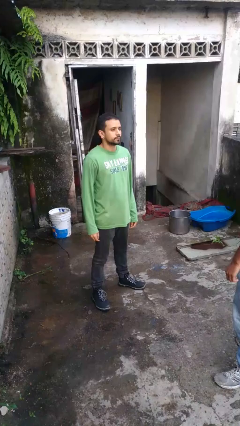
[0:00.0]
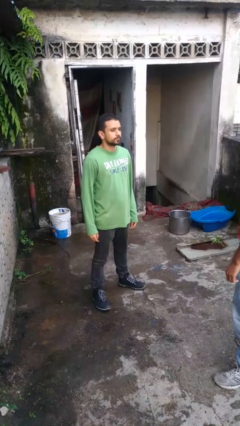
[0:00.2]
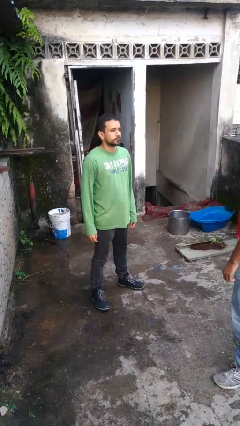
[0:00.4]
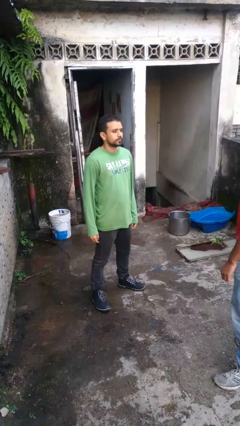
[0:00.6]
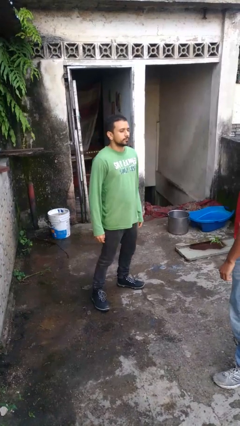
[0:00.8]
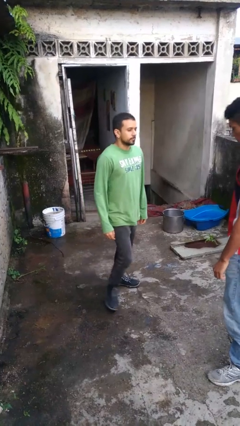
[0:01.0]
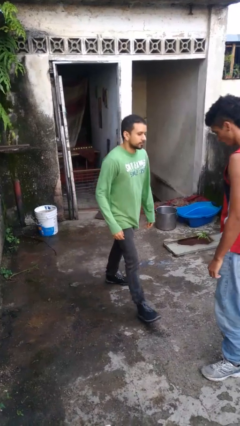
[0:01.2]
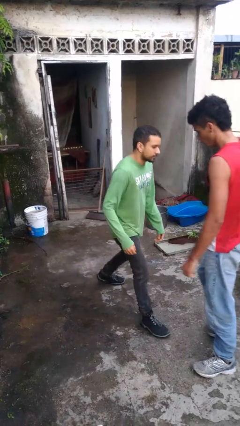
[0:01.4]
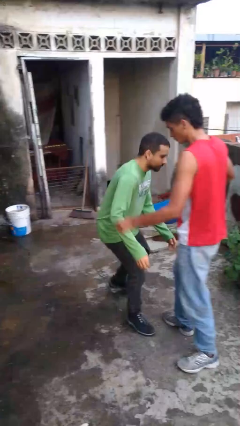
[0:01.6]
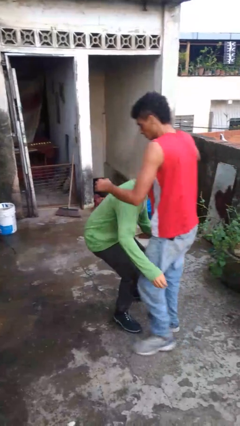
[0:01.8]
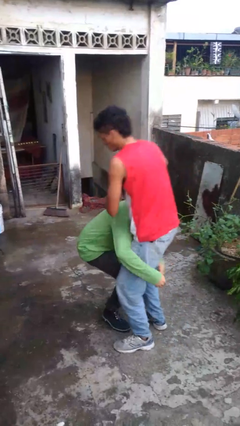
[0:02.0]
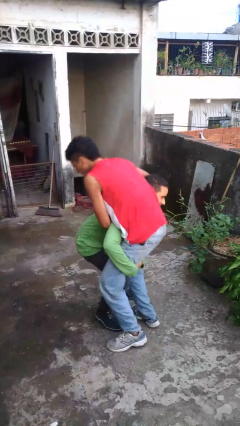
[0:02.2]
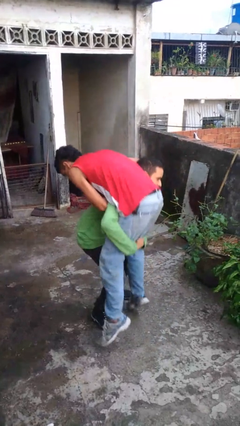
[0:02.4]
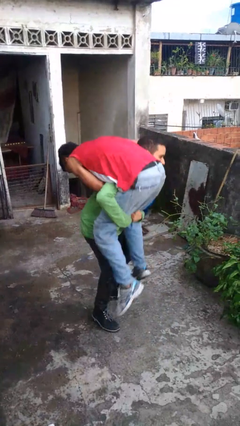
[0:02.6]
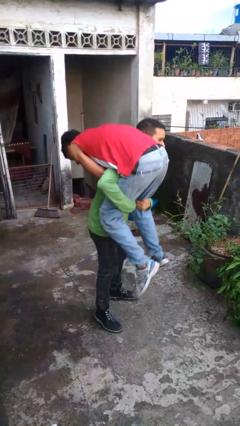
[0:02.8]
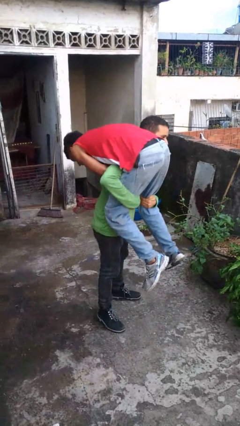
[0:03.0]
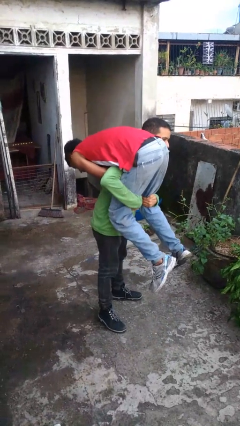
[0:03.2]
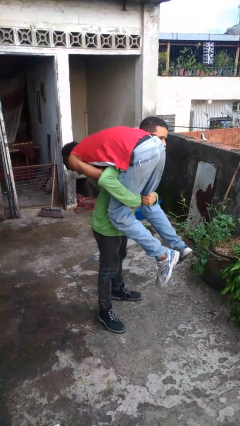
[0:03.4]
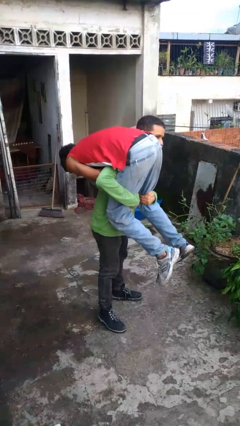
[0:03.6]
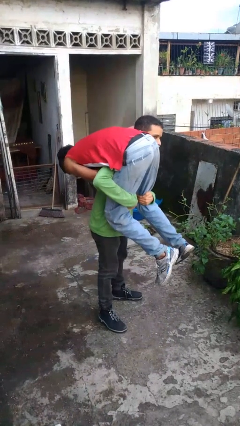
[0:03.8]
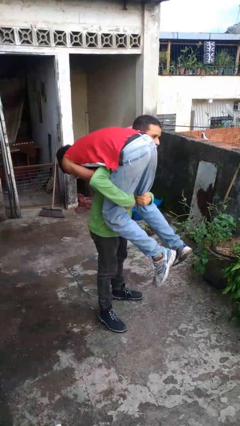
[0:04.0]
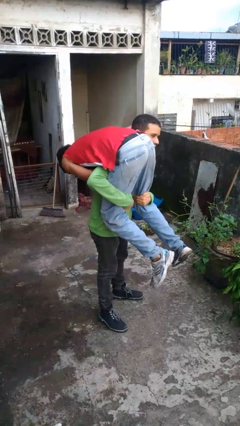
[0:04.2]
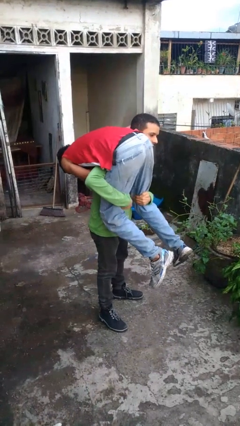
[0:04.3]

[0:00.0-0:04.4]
person carries person over shoulder

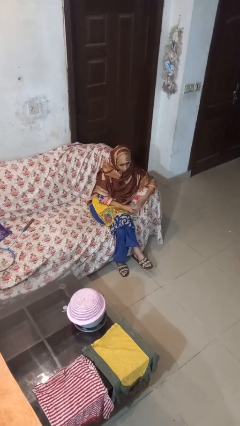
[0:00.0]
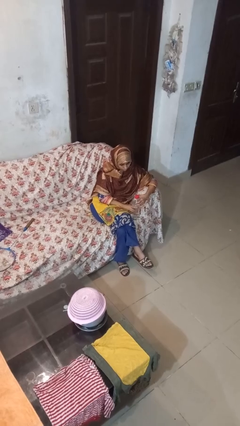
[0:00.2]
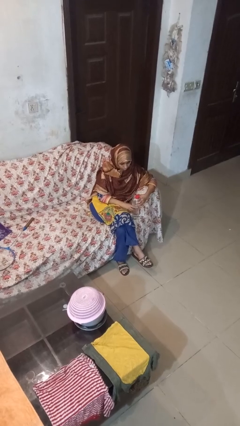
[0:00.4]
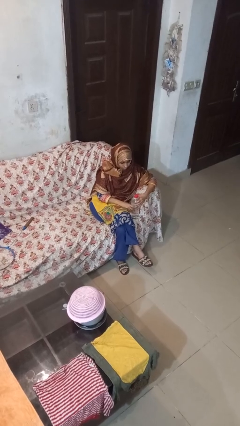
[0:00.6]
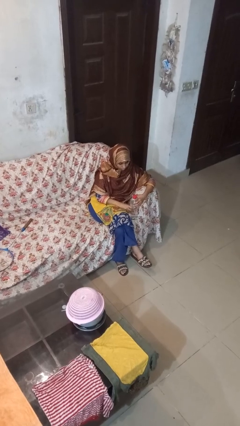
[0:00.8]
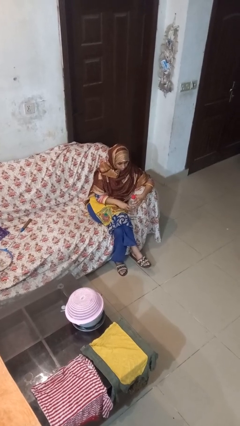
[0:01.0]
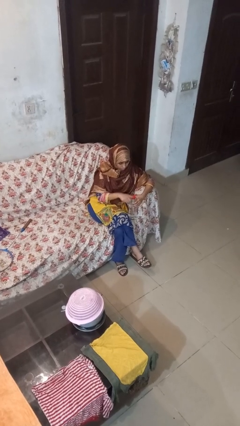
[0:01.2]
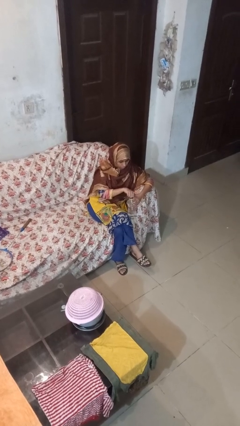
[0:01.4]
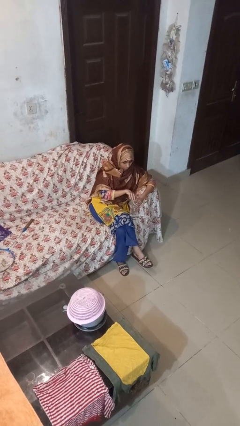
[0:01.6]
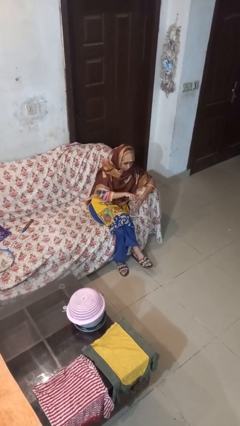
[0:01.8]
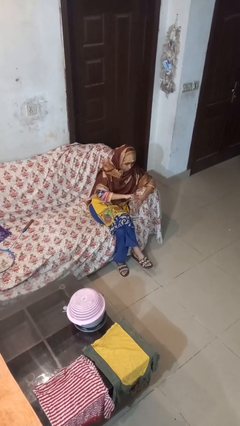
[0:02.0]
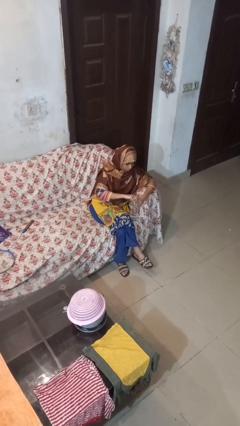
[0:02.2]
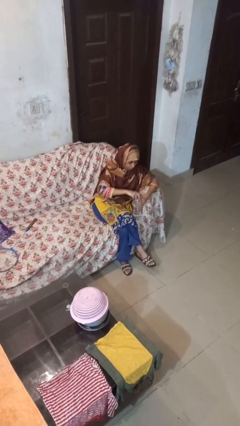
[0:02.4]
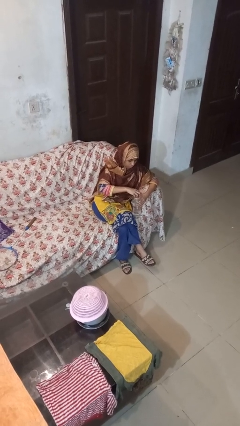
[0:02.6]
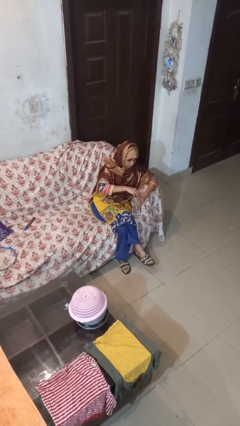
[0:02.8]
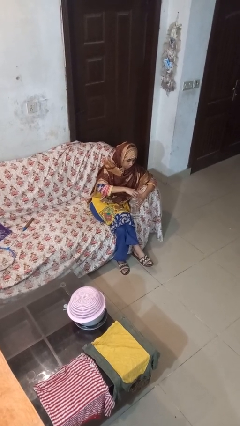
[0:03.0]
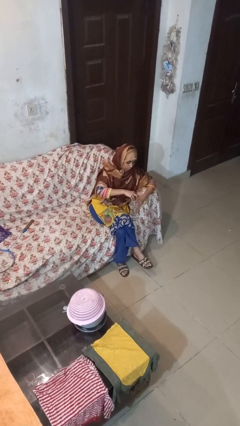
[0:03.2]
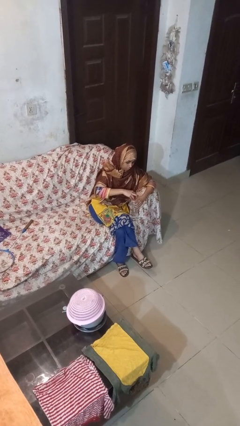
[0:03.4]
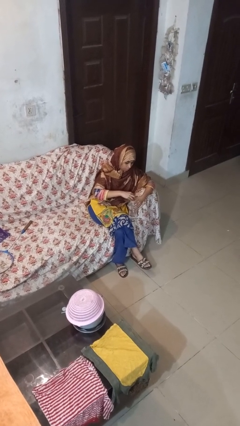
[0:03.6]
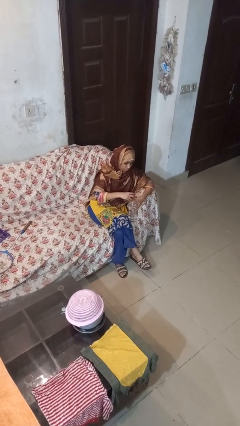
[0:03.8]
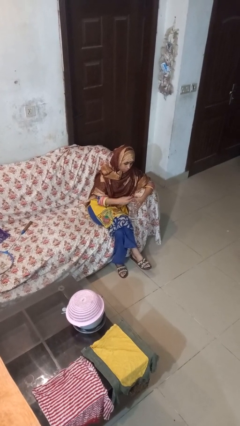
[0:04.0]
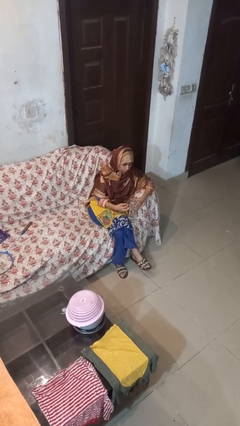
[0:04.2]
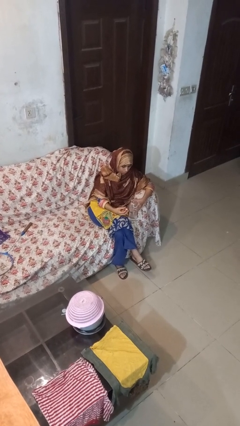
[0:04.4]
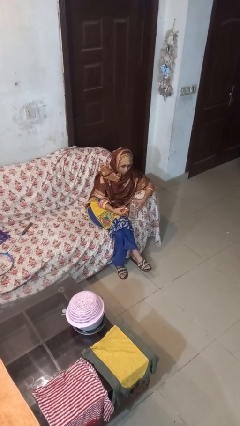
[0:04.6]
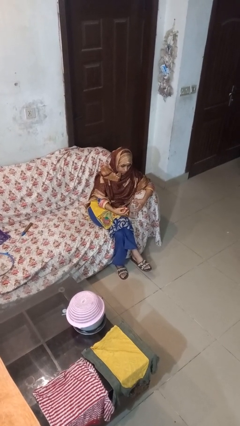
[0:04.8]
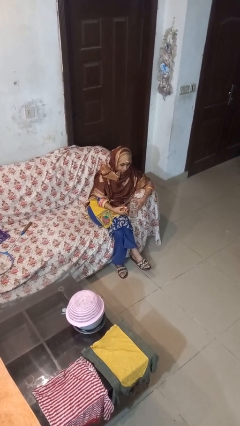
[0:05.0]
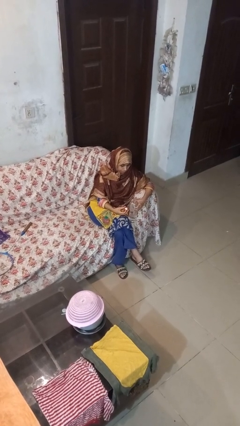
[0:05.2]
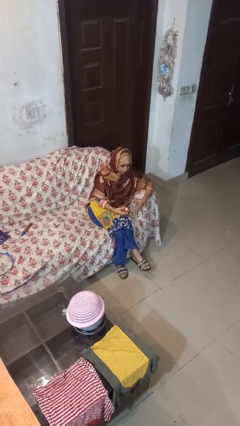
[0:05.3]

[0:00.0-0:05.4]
person unscrews lid from bottle

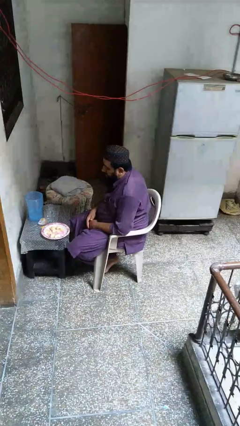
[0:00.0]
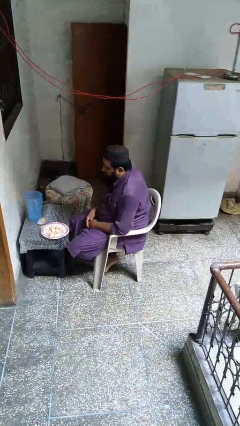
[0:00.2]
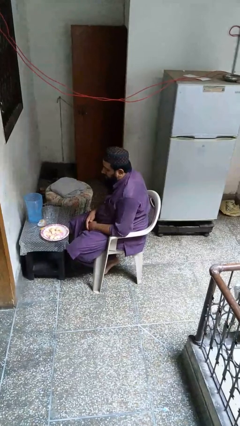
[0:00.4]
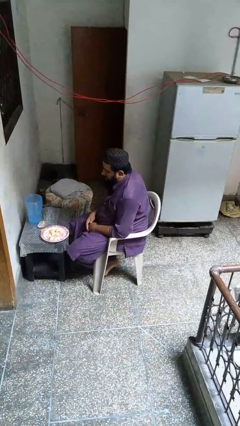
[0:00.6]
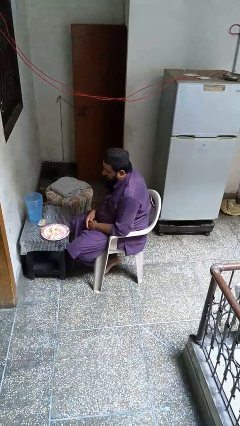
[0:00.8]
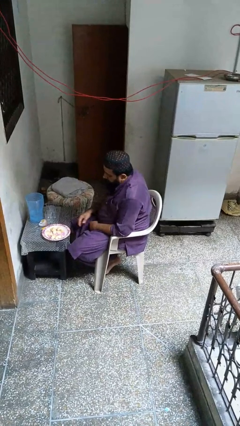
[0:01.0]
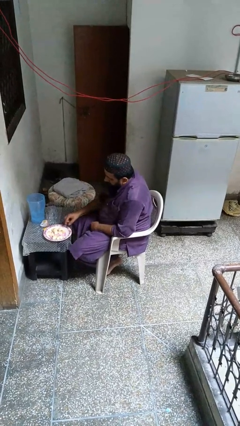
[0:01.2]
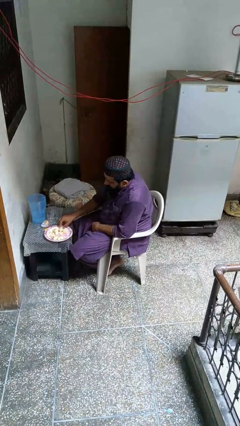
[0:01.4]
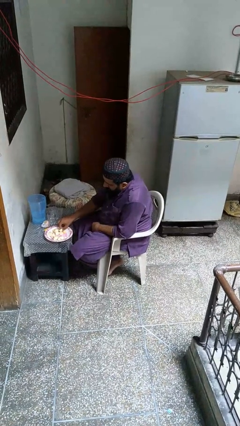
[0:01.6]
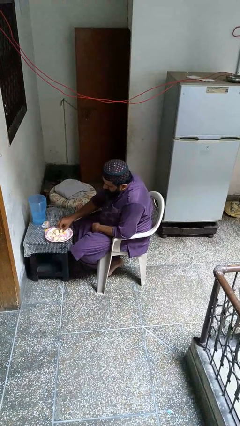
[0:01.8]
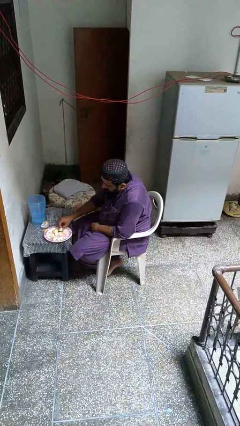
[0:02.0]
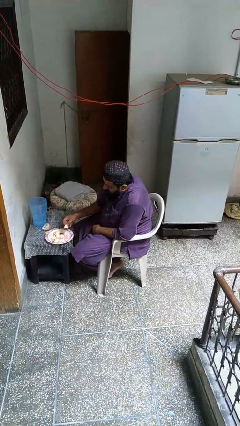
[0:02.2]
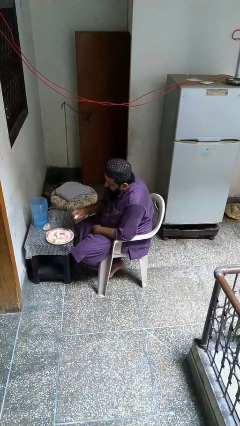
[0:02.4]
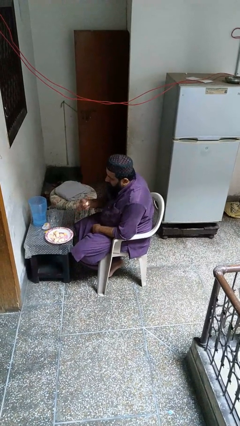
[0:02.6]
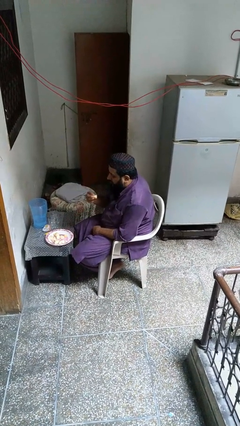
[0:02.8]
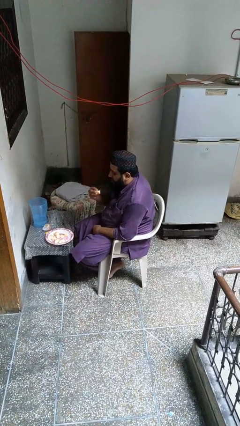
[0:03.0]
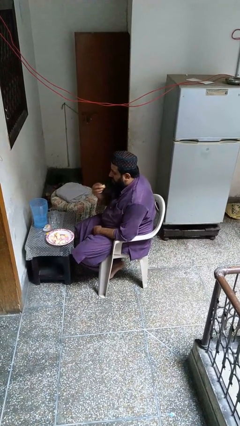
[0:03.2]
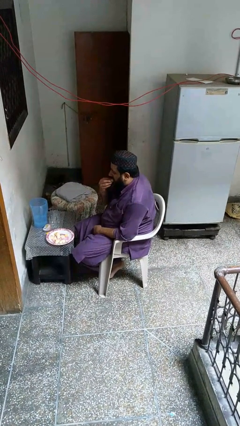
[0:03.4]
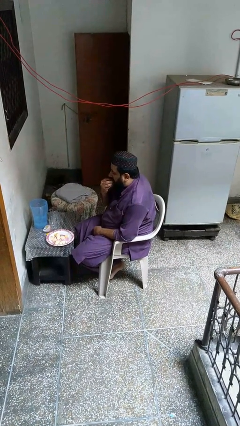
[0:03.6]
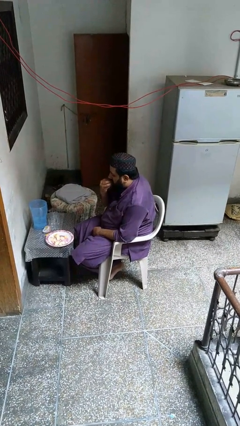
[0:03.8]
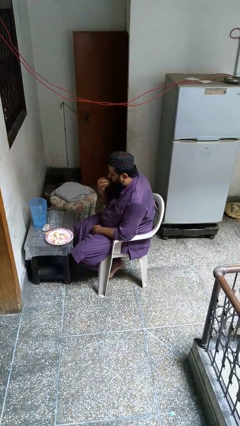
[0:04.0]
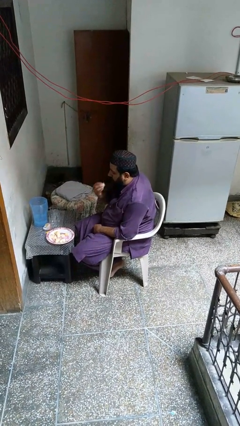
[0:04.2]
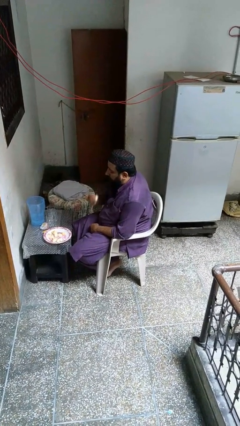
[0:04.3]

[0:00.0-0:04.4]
person eats with hands

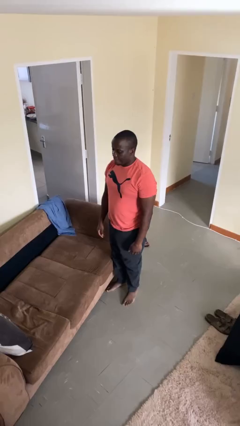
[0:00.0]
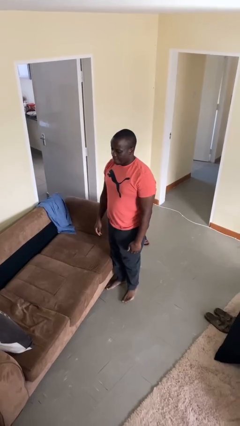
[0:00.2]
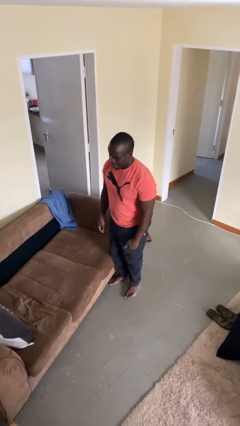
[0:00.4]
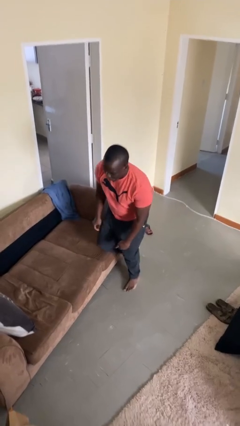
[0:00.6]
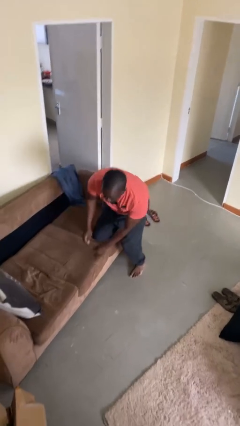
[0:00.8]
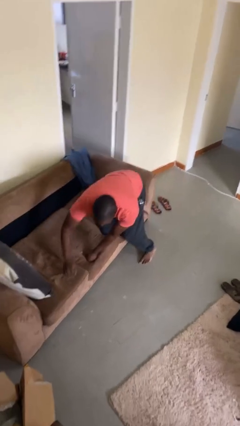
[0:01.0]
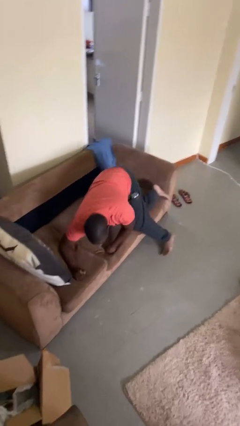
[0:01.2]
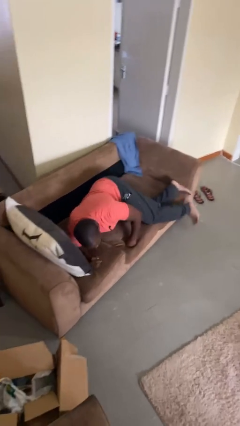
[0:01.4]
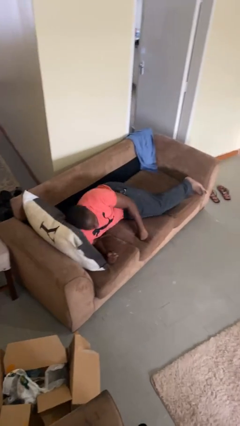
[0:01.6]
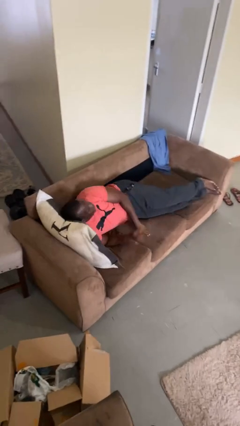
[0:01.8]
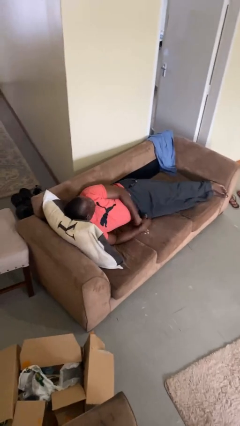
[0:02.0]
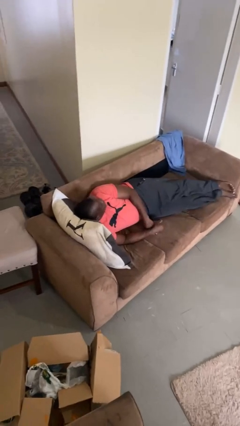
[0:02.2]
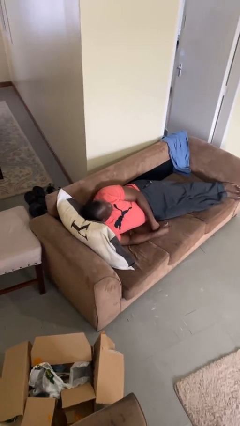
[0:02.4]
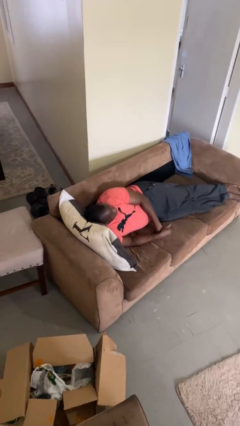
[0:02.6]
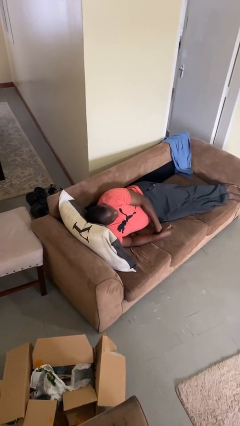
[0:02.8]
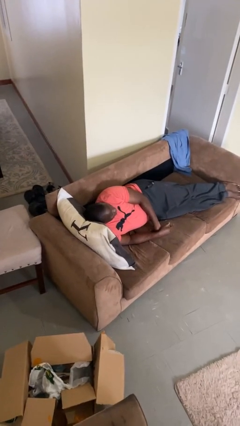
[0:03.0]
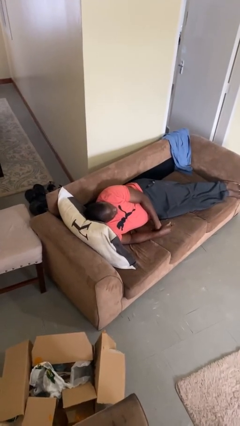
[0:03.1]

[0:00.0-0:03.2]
person lies down on couch
